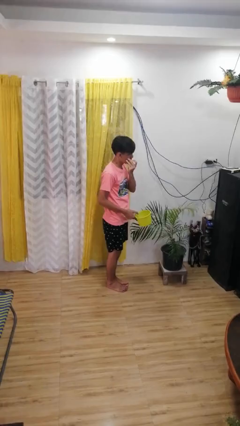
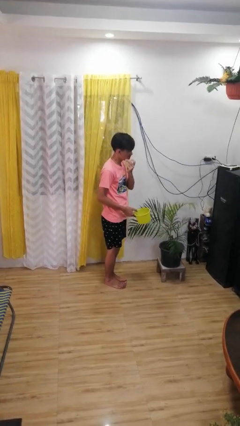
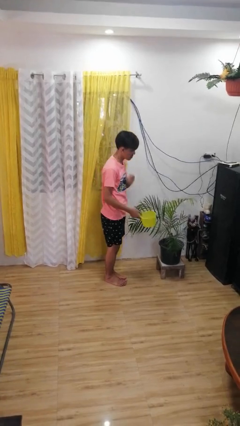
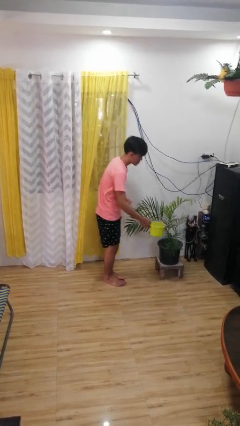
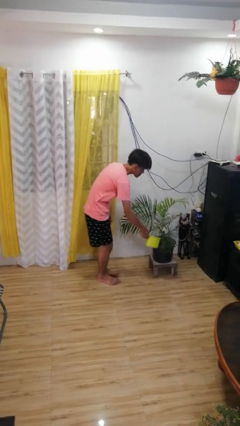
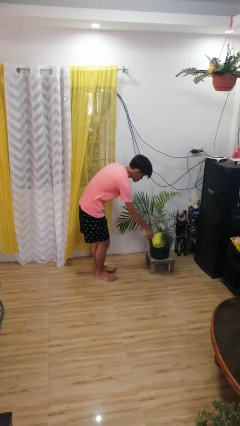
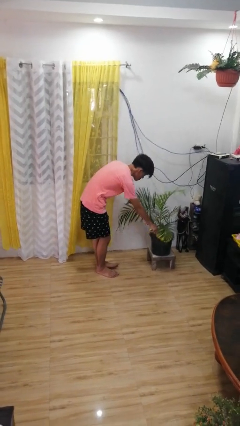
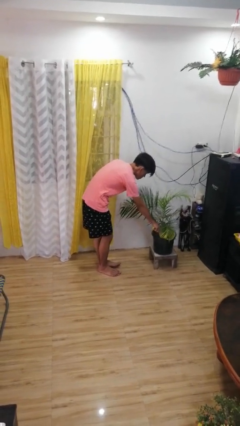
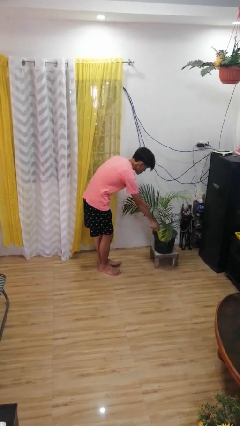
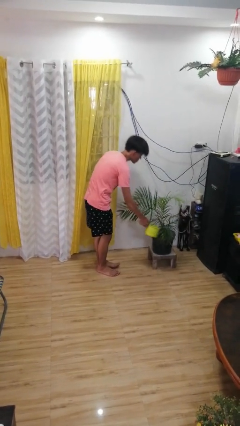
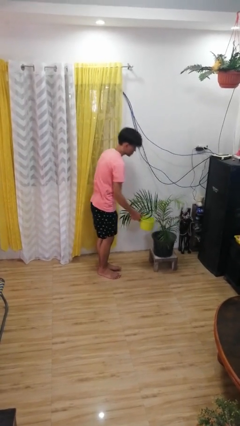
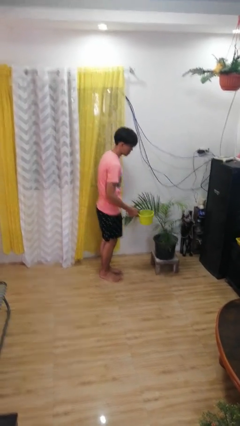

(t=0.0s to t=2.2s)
person waters houseplant

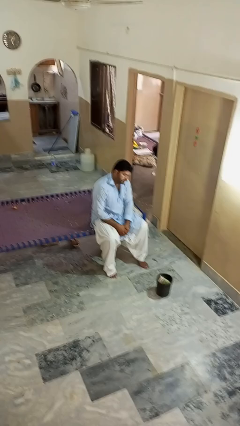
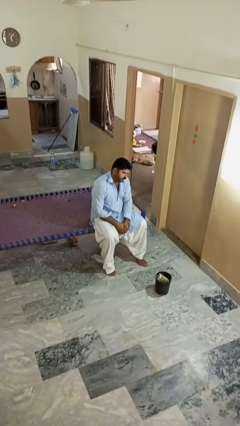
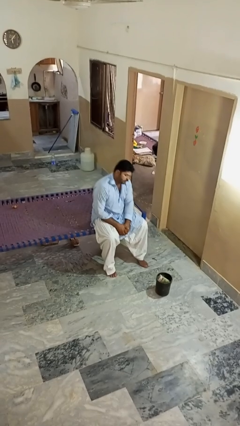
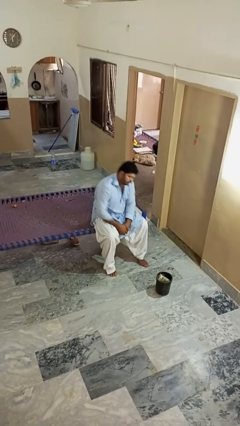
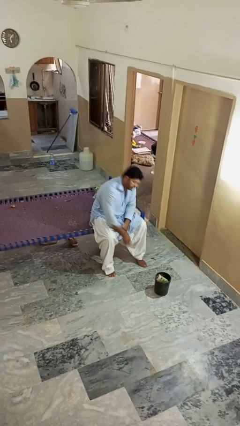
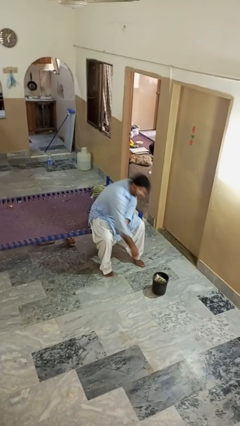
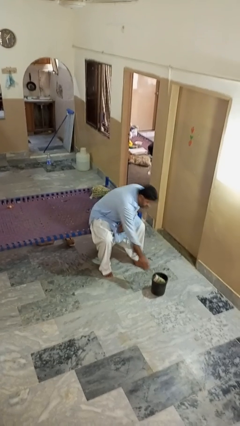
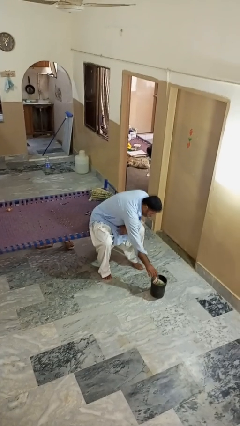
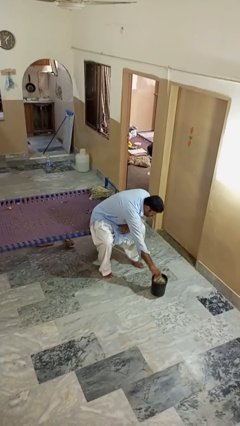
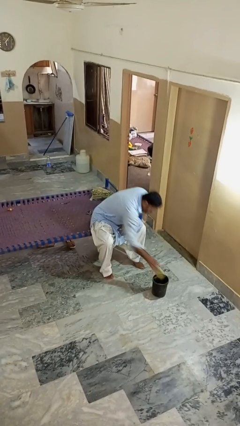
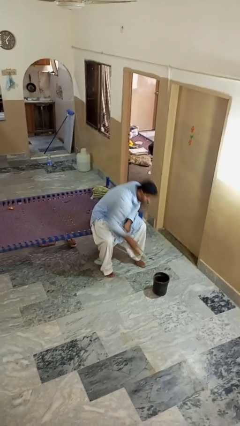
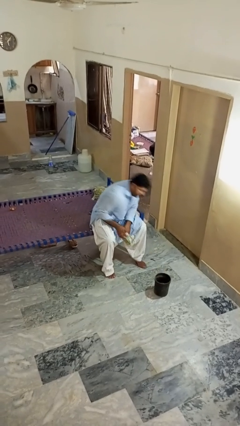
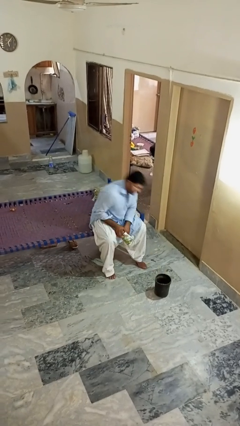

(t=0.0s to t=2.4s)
person takes object from basket

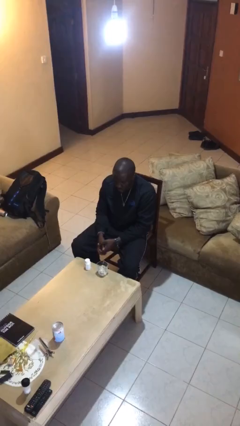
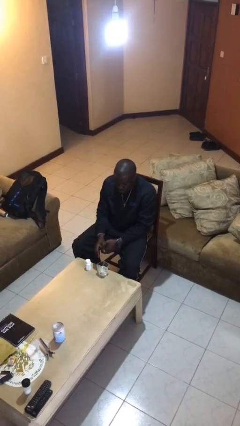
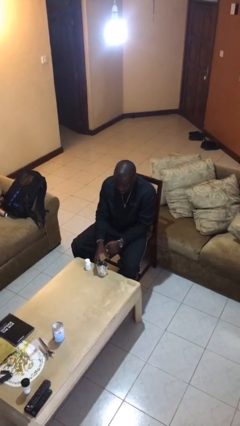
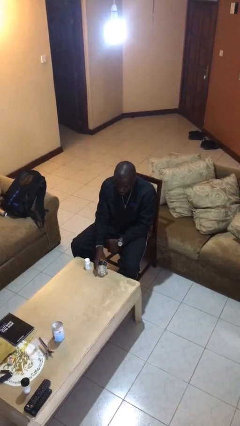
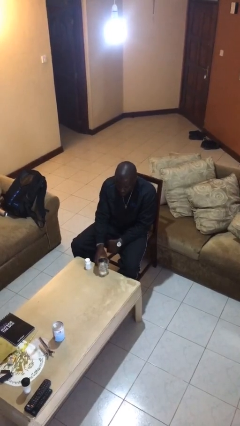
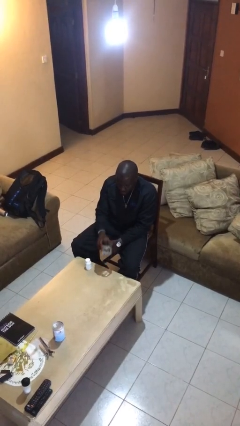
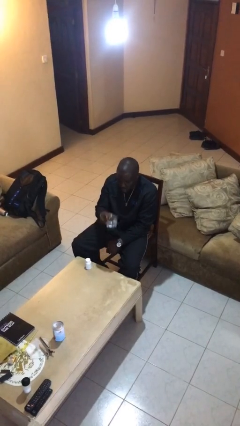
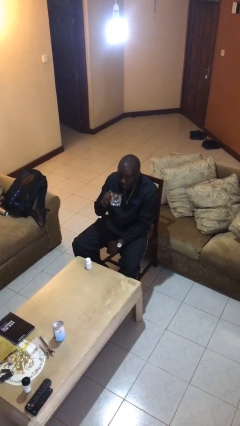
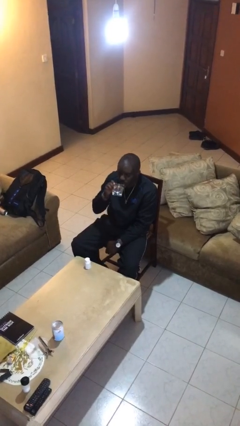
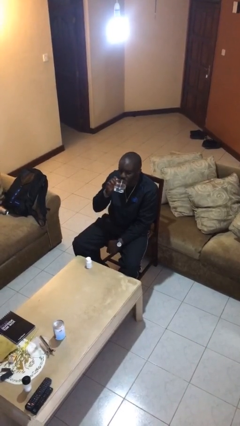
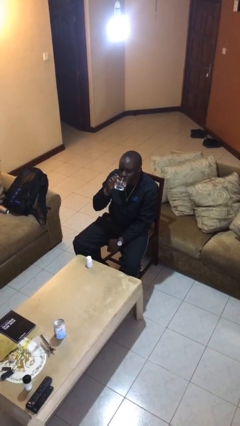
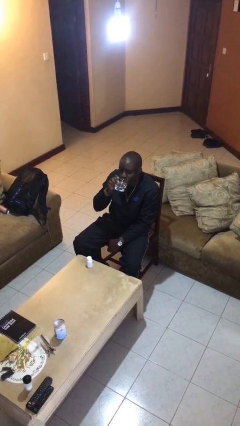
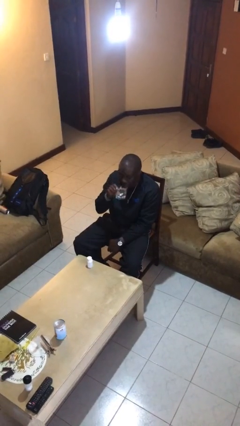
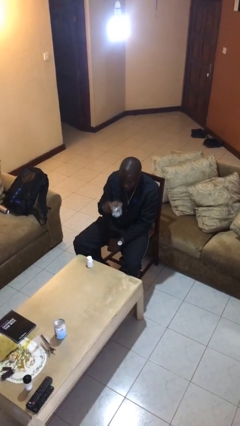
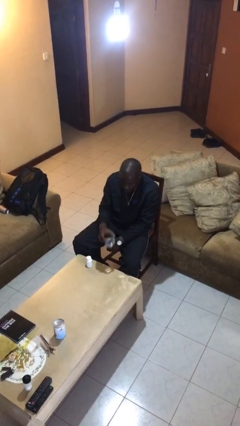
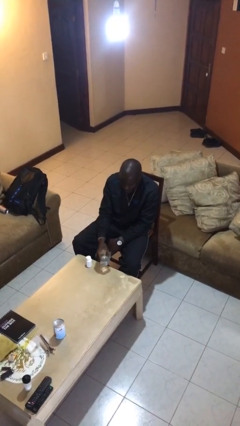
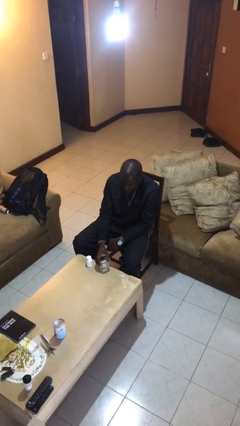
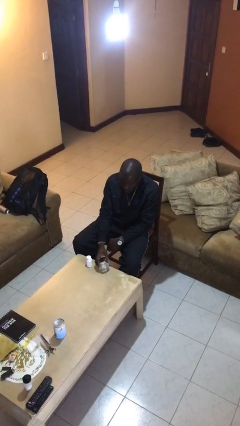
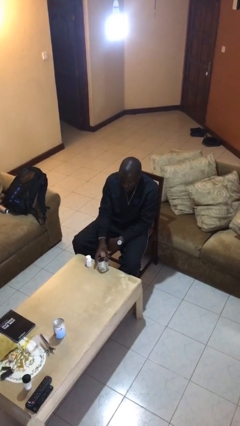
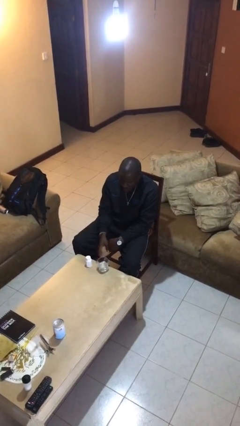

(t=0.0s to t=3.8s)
person drinks from cup

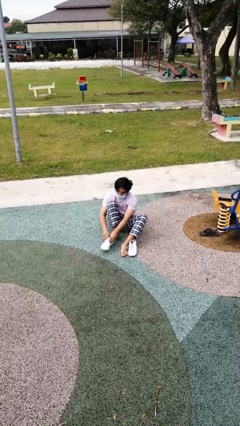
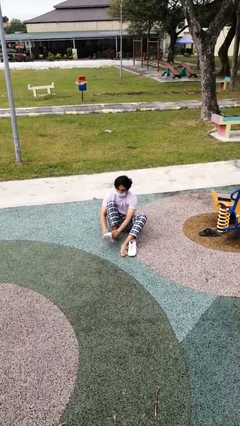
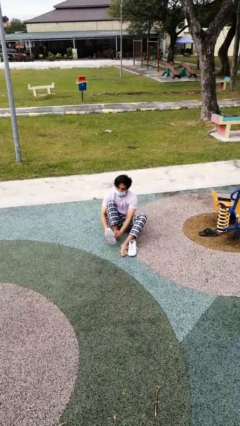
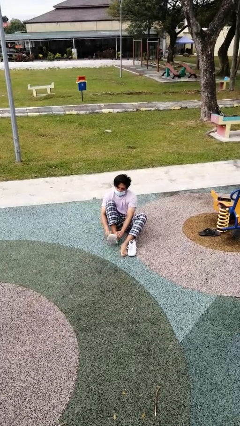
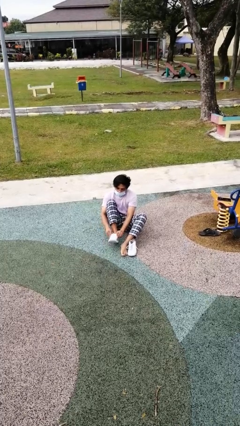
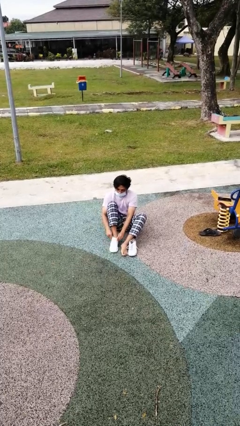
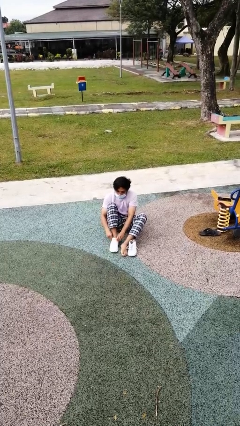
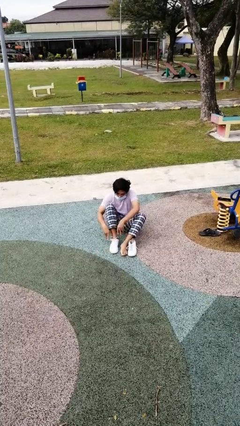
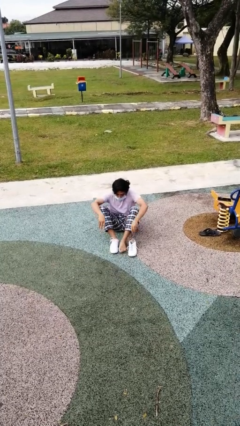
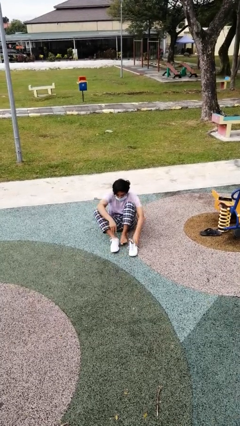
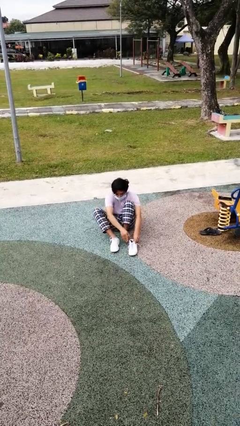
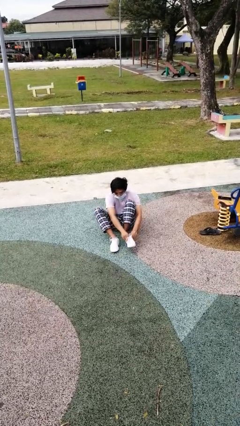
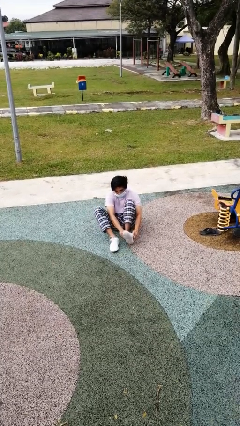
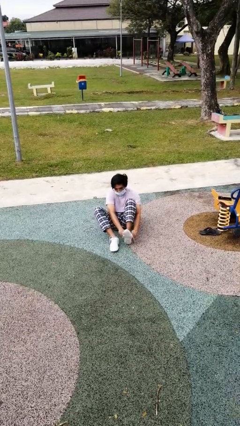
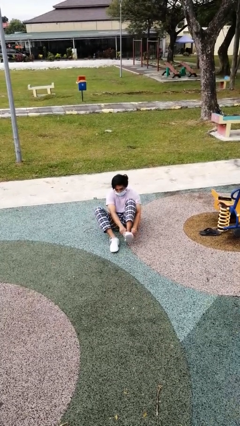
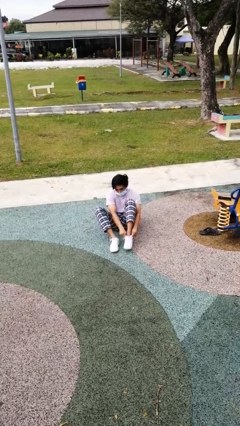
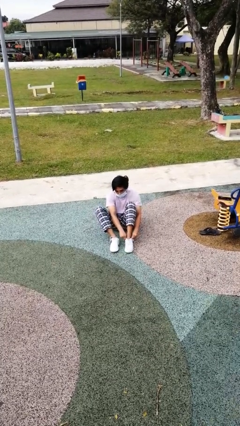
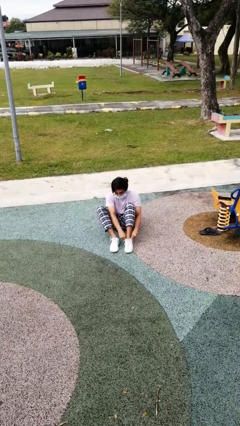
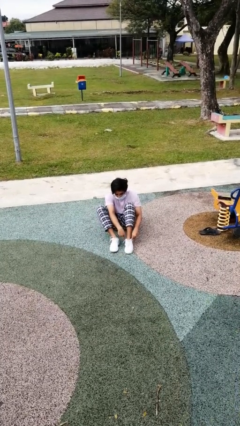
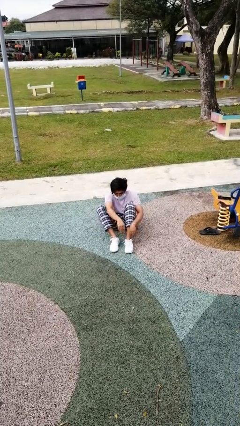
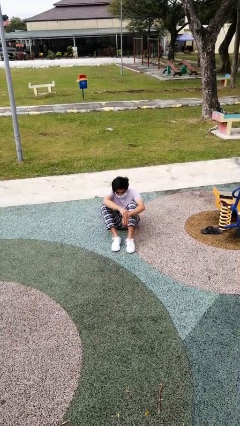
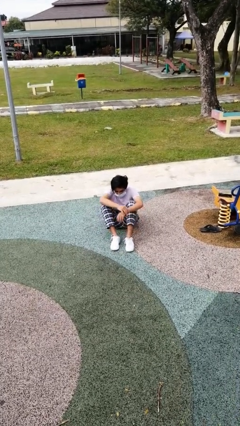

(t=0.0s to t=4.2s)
person puts on shoes

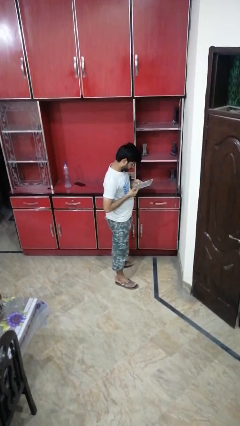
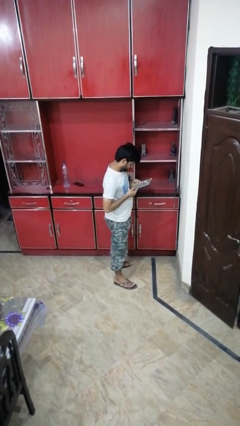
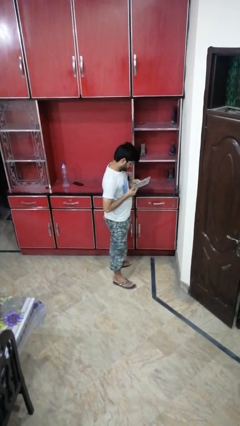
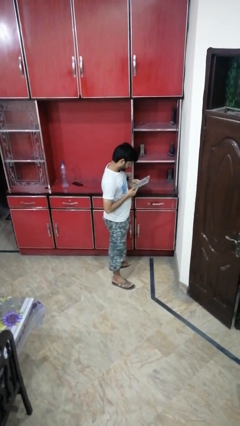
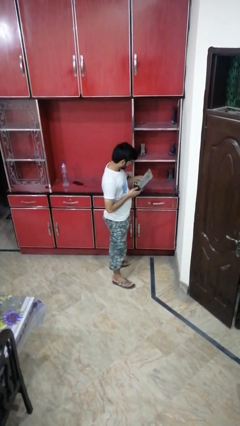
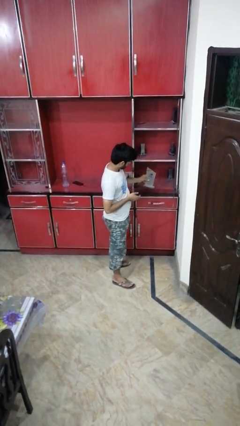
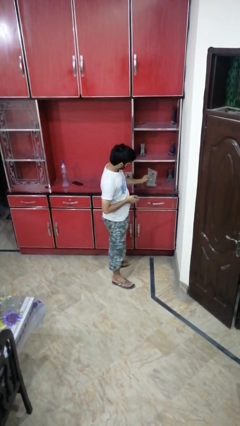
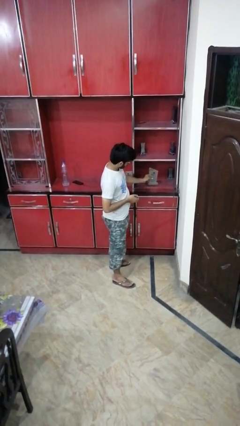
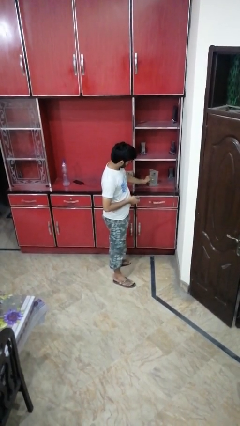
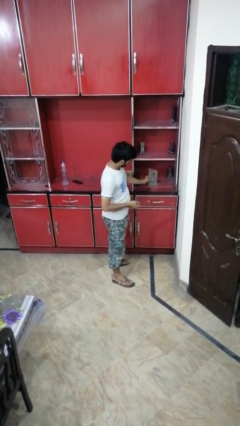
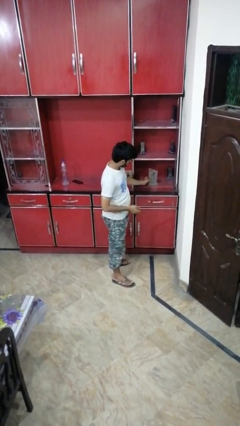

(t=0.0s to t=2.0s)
person puts down object into cabinet

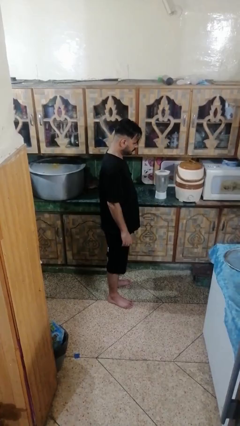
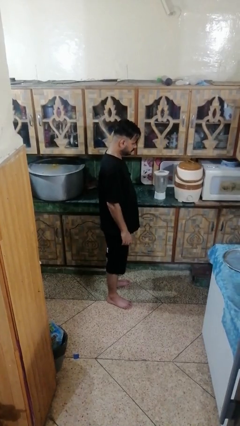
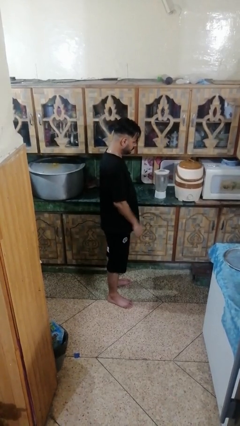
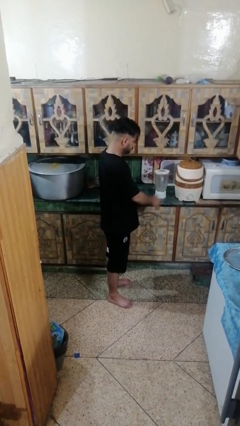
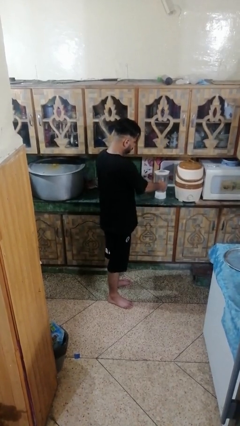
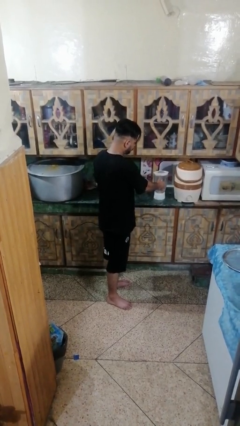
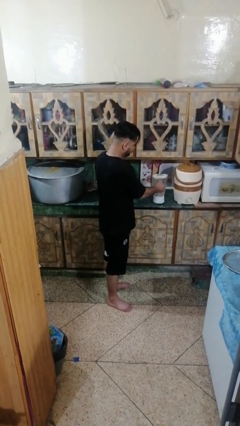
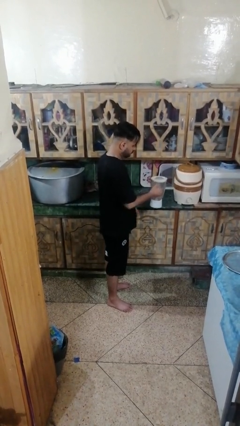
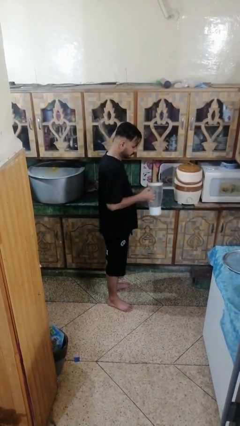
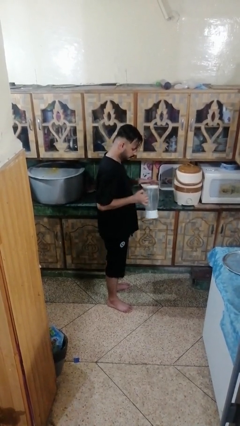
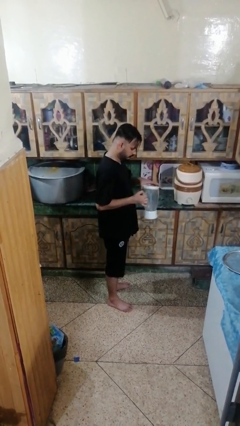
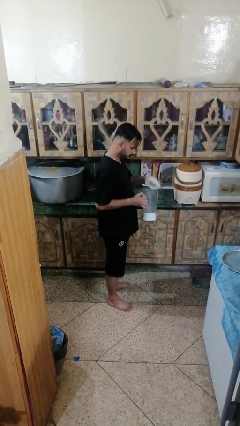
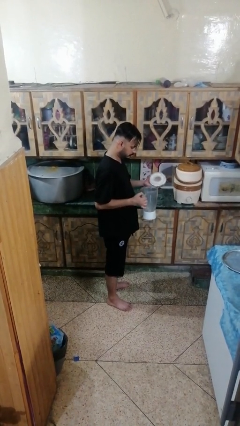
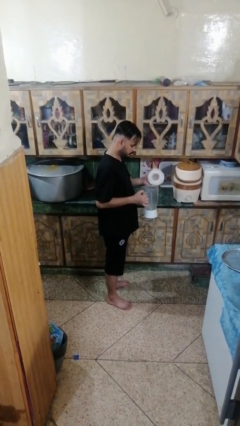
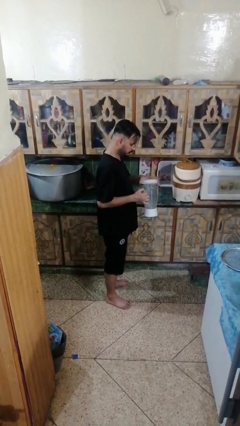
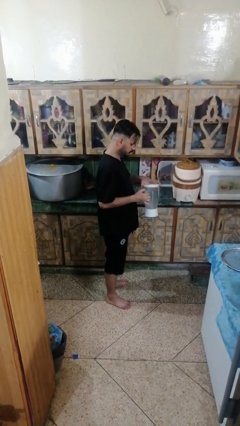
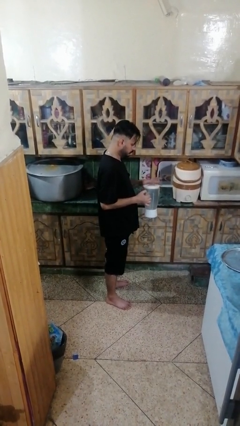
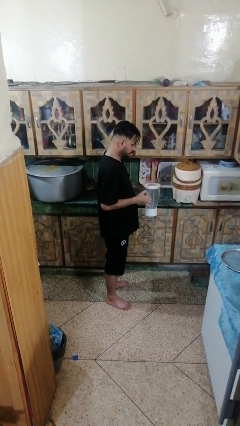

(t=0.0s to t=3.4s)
person picks up object from countertop
